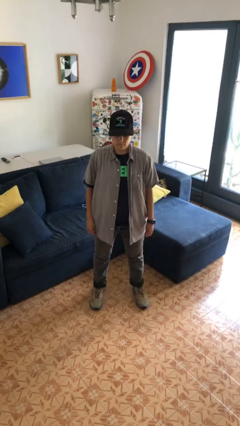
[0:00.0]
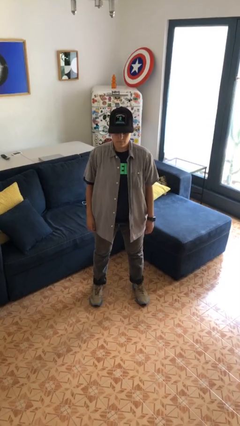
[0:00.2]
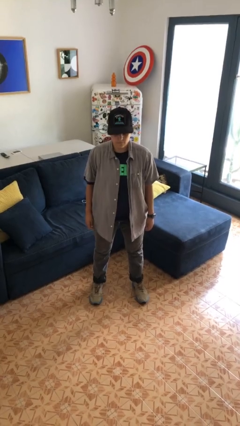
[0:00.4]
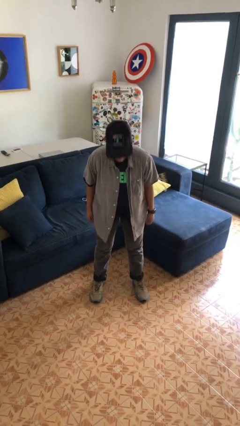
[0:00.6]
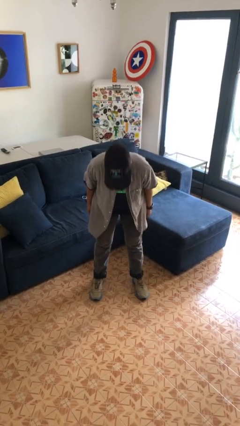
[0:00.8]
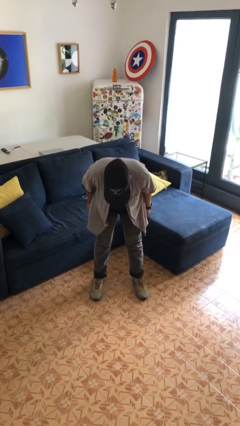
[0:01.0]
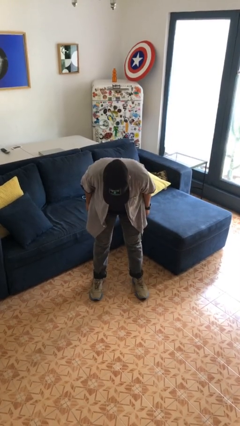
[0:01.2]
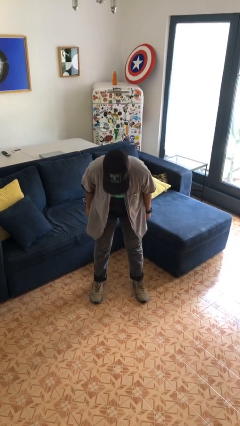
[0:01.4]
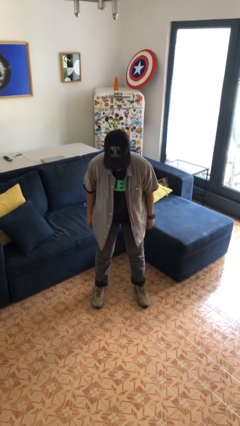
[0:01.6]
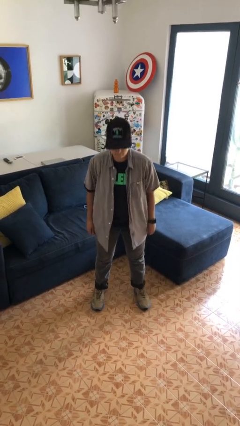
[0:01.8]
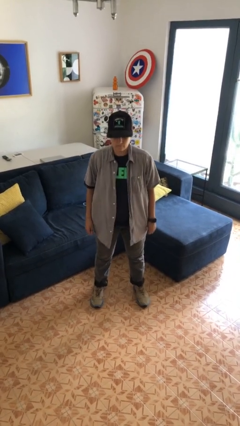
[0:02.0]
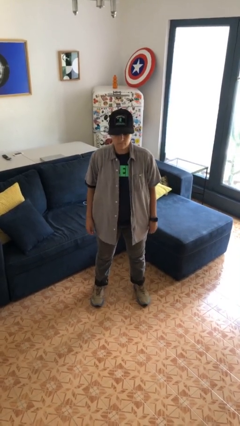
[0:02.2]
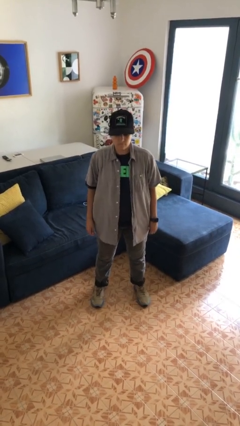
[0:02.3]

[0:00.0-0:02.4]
person bows

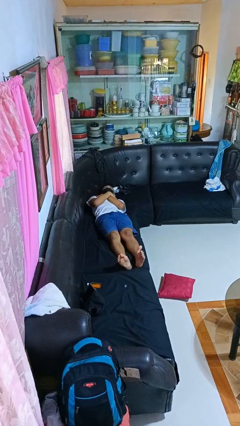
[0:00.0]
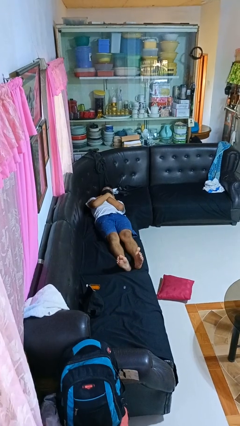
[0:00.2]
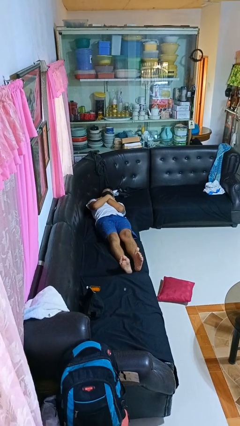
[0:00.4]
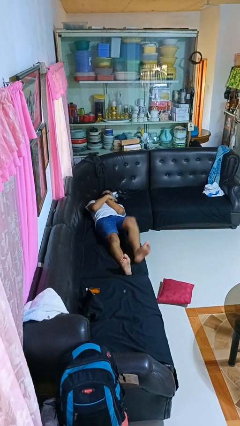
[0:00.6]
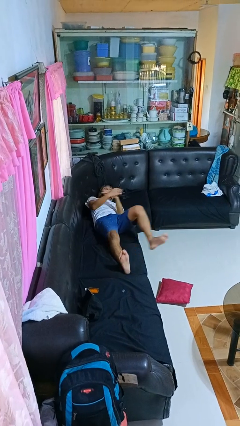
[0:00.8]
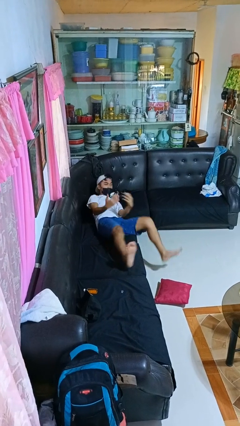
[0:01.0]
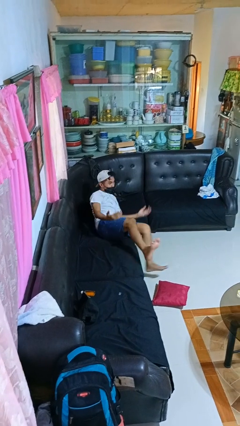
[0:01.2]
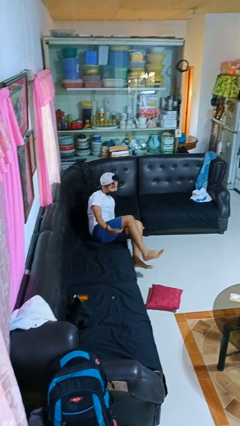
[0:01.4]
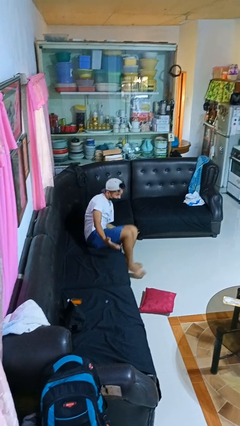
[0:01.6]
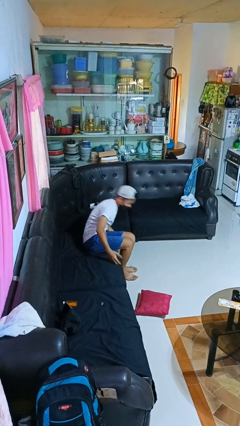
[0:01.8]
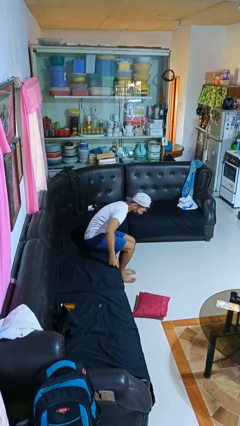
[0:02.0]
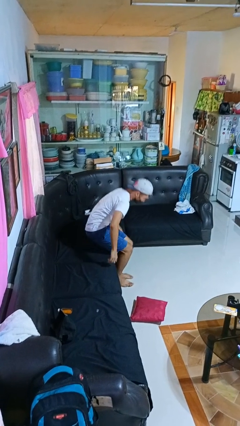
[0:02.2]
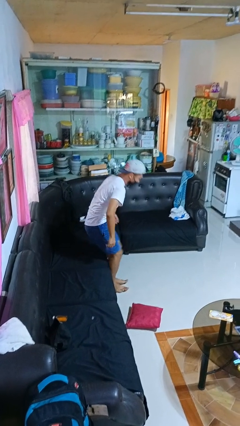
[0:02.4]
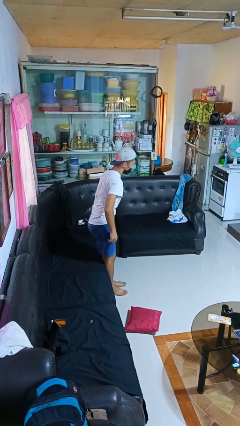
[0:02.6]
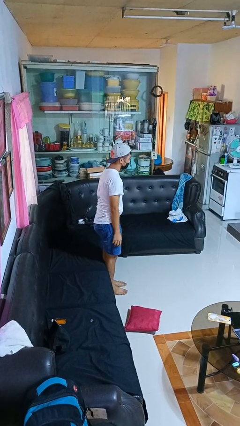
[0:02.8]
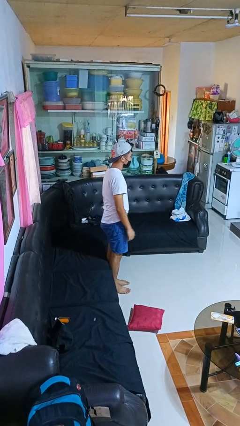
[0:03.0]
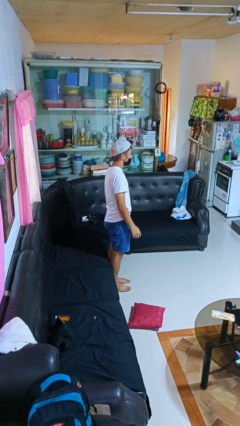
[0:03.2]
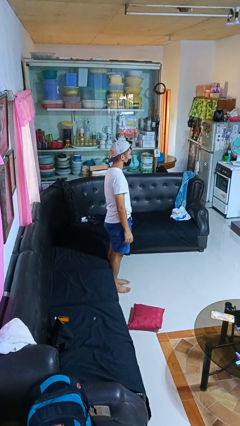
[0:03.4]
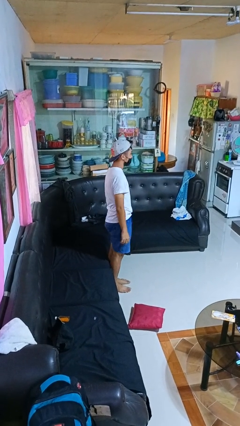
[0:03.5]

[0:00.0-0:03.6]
person stands up

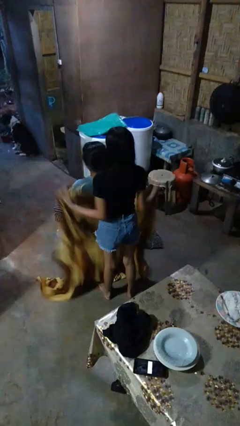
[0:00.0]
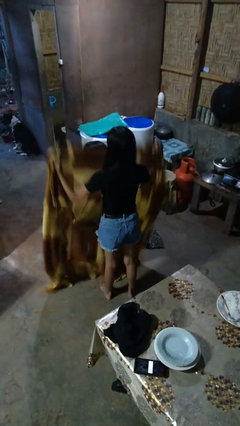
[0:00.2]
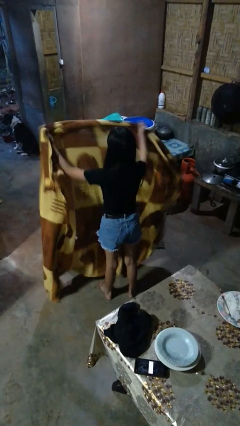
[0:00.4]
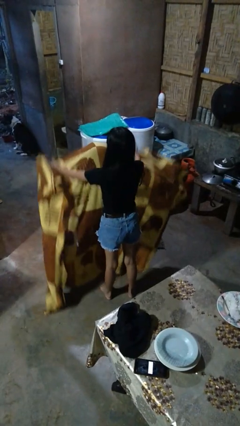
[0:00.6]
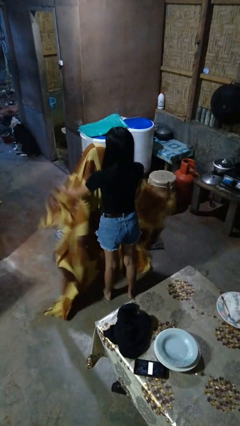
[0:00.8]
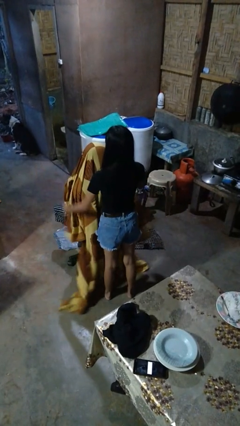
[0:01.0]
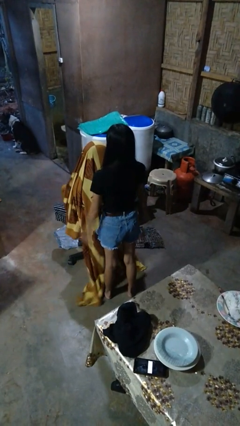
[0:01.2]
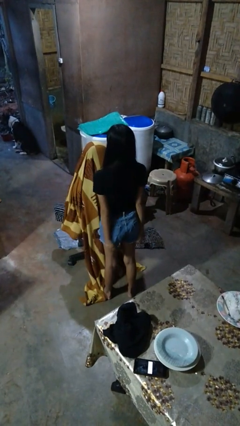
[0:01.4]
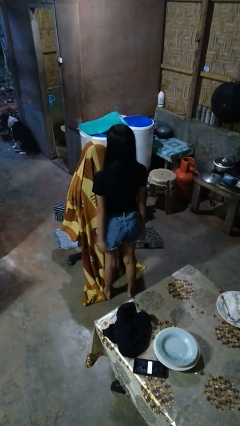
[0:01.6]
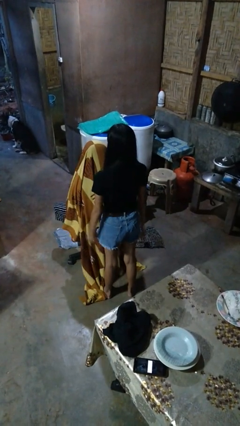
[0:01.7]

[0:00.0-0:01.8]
person covers friend with blanket

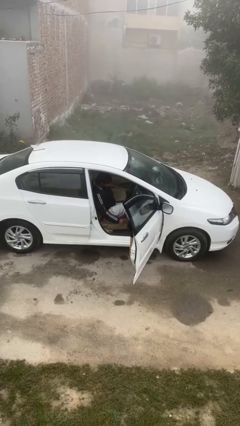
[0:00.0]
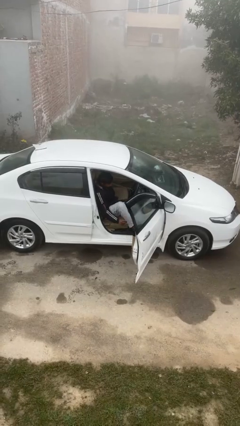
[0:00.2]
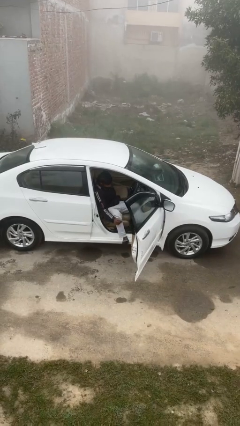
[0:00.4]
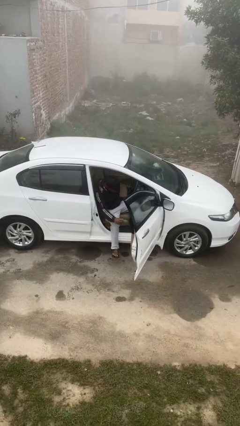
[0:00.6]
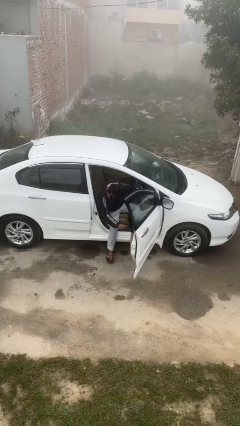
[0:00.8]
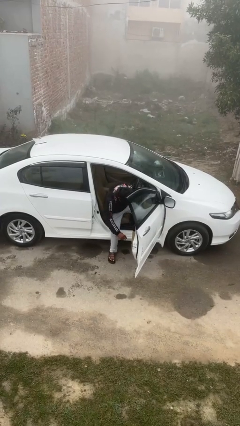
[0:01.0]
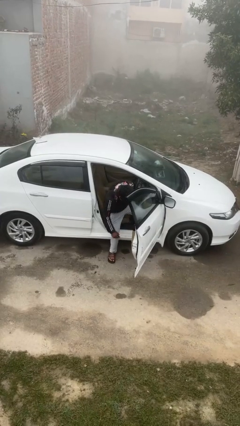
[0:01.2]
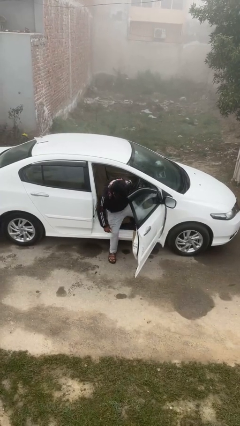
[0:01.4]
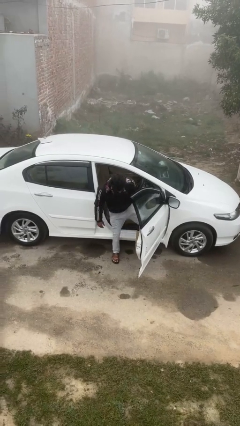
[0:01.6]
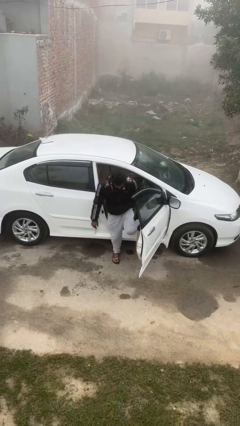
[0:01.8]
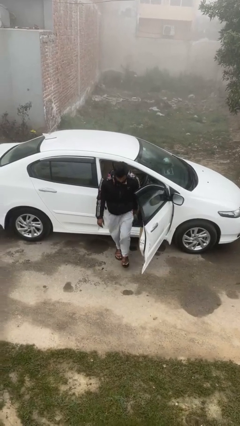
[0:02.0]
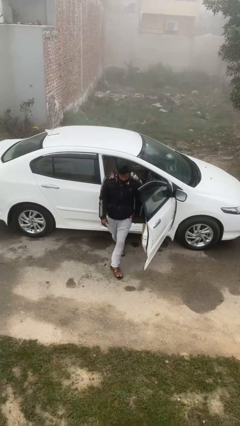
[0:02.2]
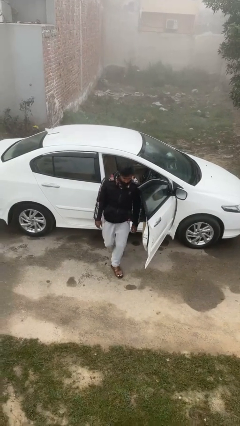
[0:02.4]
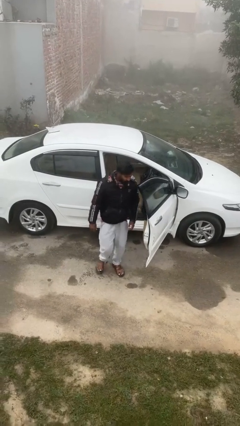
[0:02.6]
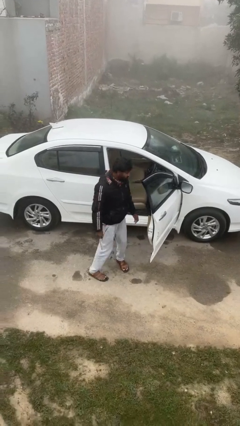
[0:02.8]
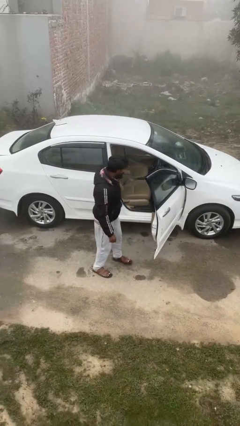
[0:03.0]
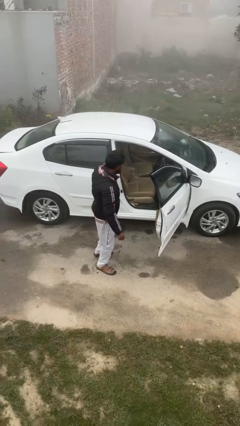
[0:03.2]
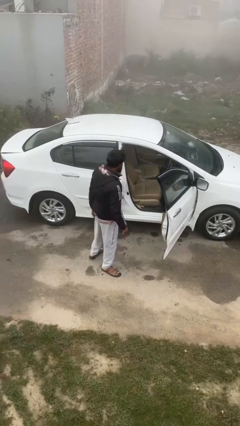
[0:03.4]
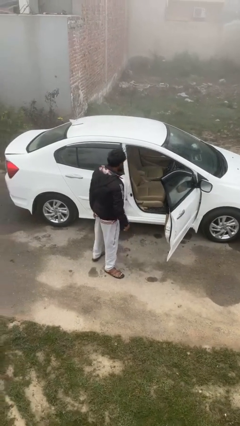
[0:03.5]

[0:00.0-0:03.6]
person exits car

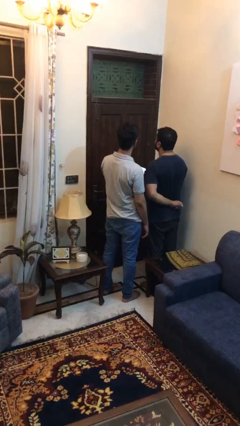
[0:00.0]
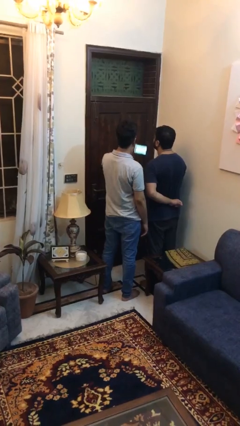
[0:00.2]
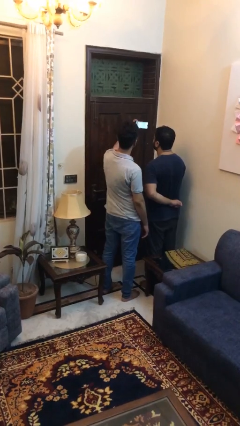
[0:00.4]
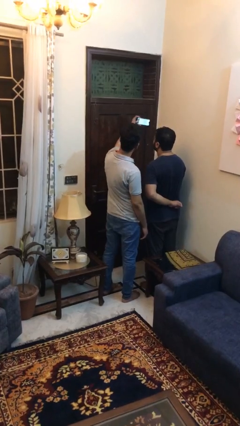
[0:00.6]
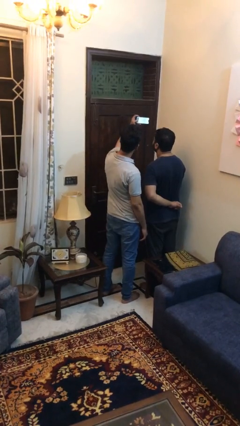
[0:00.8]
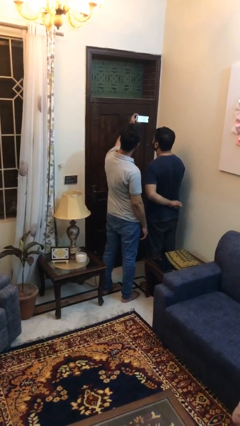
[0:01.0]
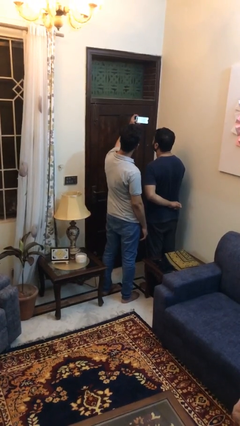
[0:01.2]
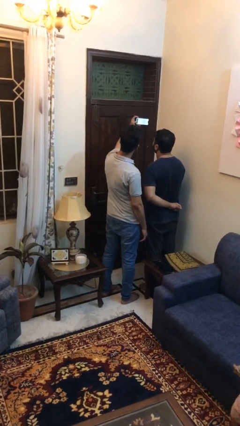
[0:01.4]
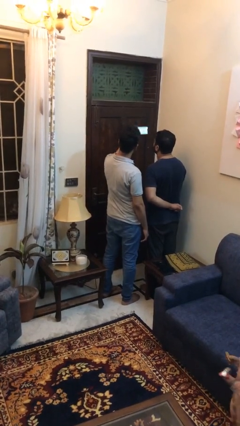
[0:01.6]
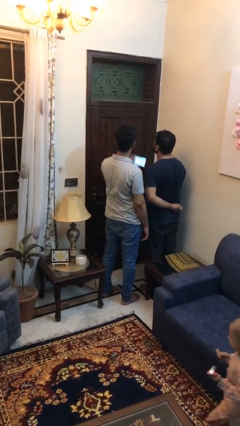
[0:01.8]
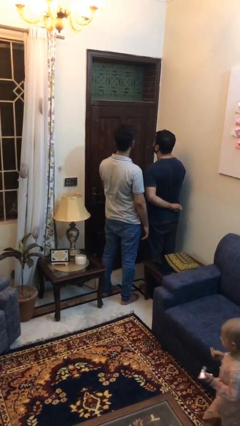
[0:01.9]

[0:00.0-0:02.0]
person takes selfie with person

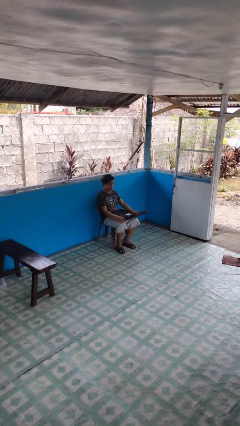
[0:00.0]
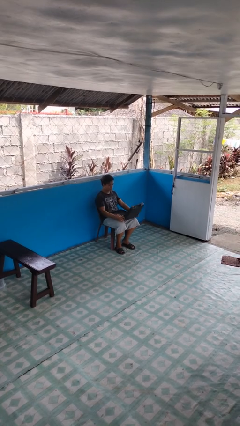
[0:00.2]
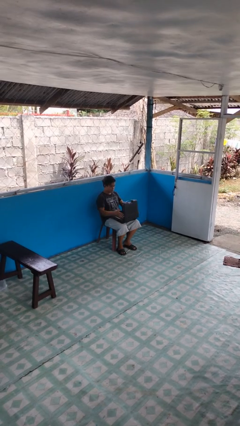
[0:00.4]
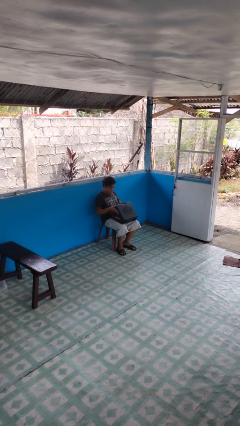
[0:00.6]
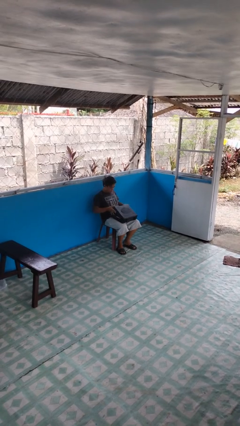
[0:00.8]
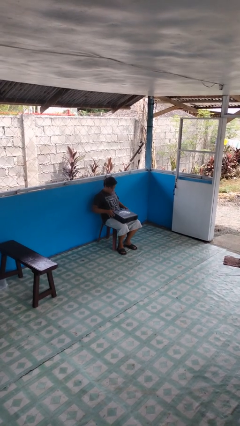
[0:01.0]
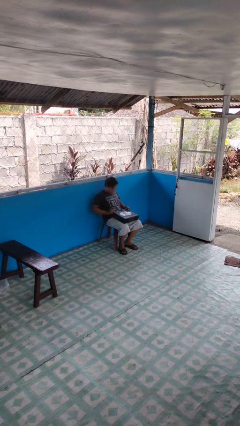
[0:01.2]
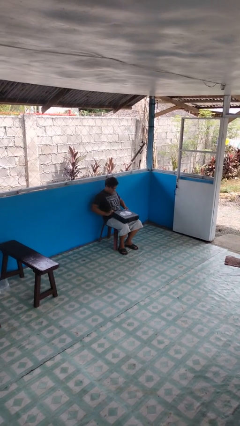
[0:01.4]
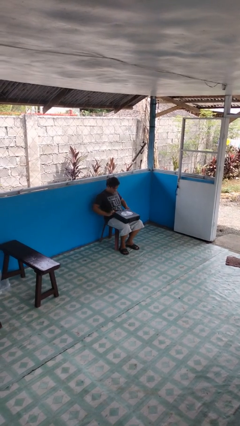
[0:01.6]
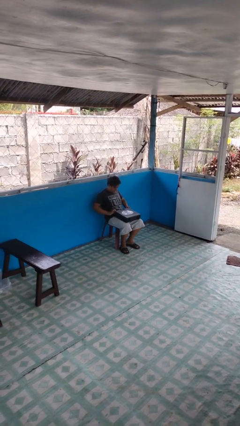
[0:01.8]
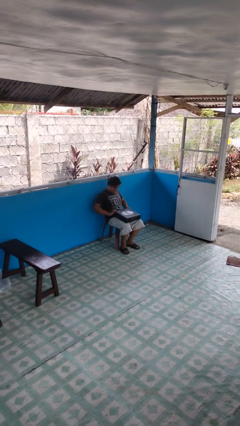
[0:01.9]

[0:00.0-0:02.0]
person closes suitcase

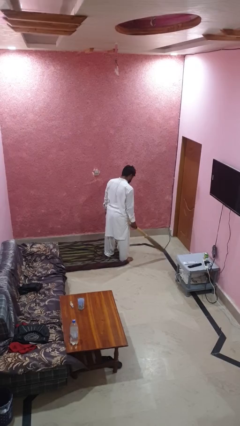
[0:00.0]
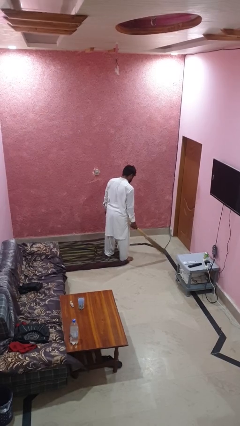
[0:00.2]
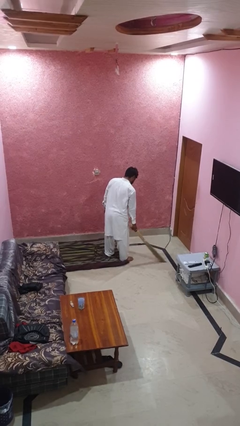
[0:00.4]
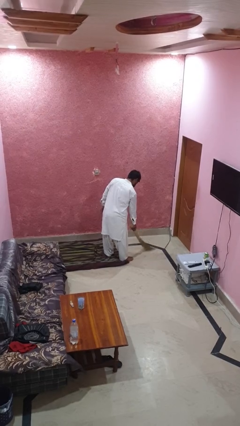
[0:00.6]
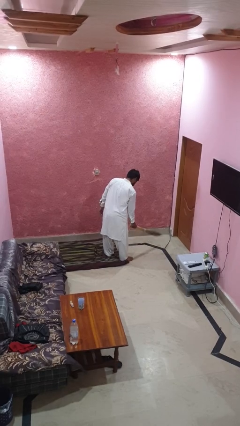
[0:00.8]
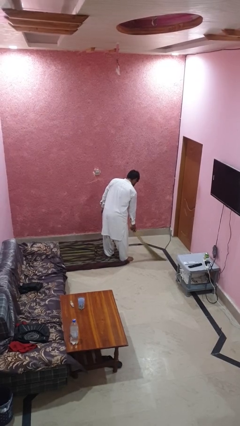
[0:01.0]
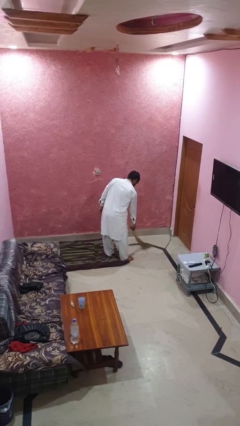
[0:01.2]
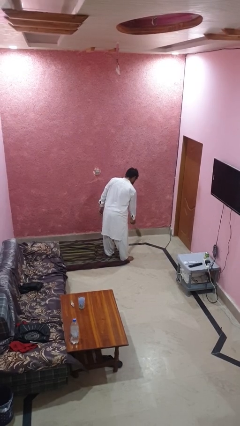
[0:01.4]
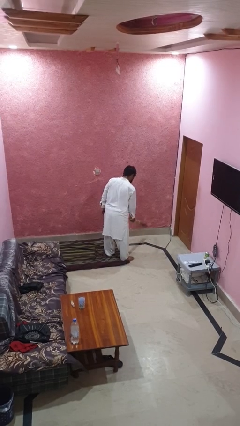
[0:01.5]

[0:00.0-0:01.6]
person sweeps floor

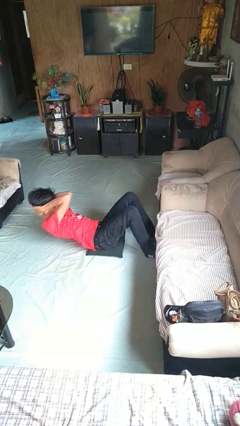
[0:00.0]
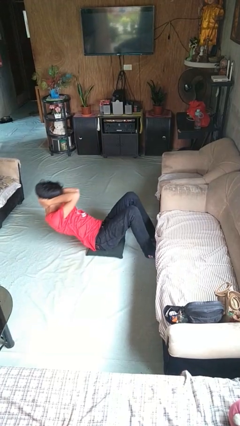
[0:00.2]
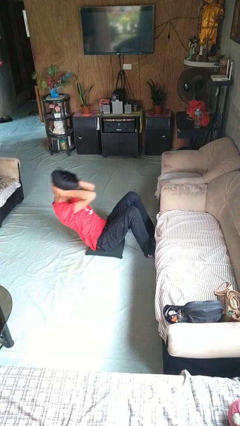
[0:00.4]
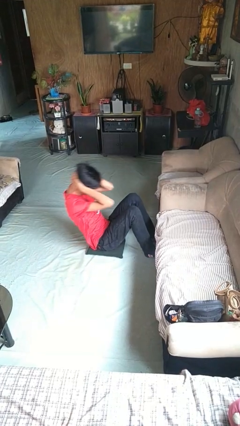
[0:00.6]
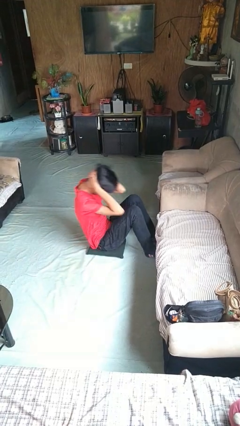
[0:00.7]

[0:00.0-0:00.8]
person exercises with situp
